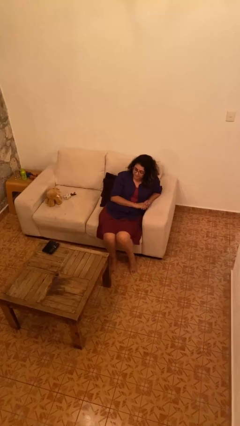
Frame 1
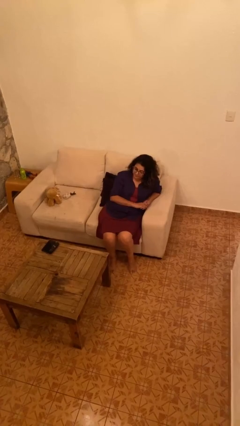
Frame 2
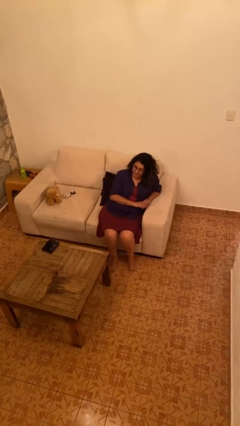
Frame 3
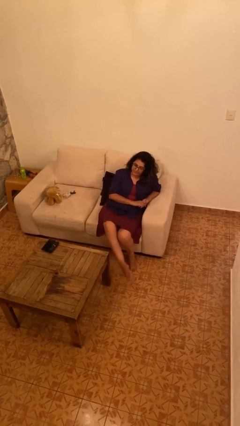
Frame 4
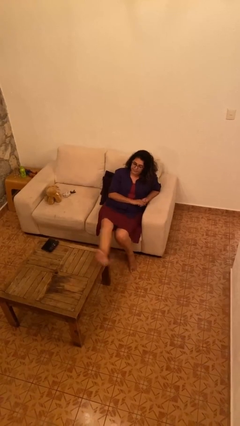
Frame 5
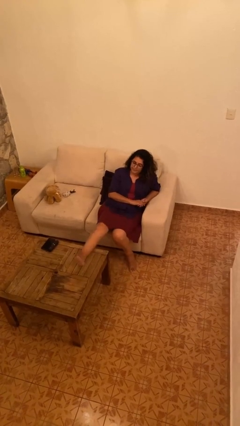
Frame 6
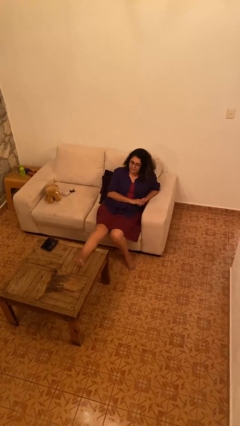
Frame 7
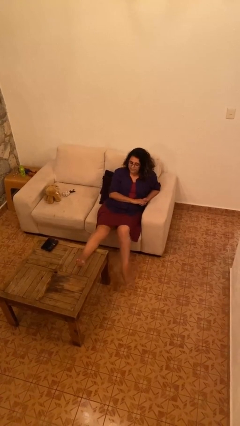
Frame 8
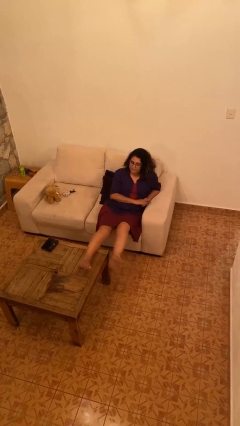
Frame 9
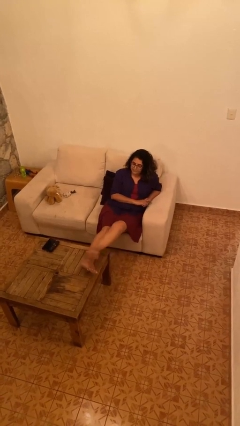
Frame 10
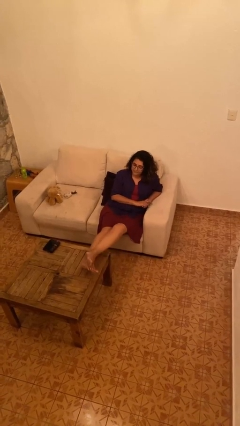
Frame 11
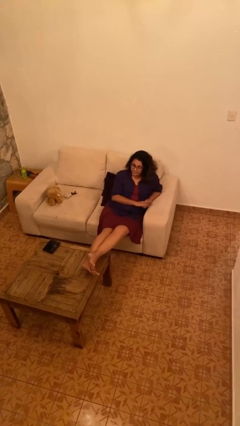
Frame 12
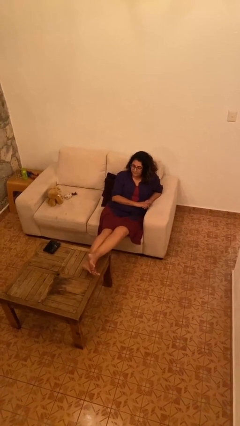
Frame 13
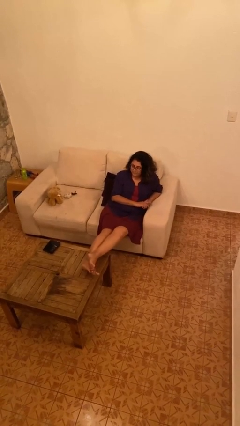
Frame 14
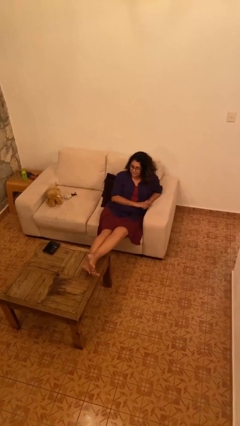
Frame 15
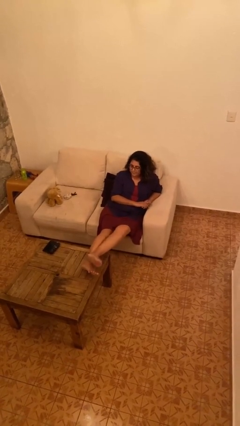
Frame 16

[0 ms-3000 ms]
person puts feet up

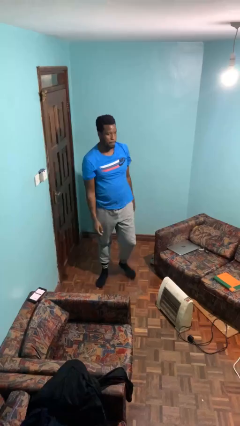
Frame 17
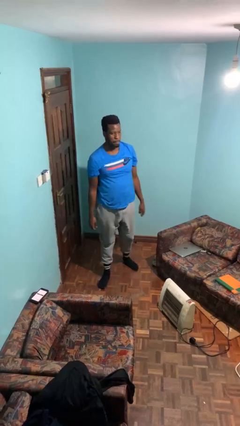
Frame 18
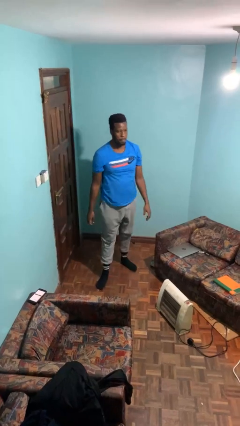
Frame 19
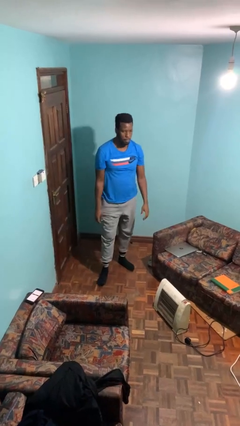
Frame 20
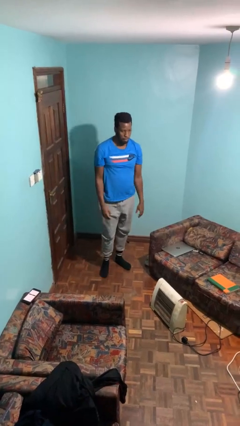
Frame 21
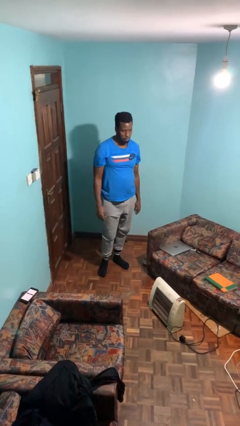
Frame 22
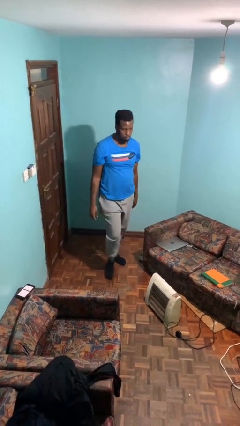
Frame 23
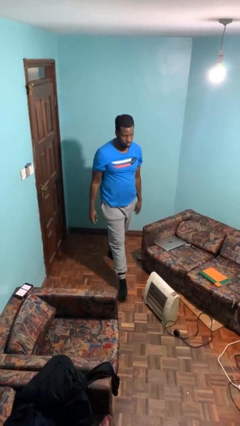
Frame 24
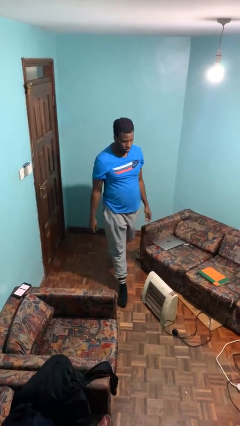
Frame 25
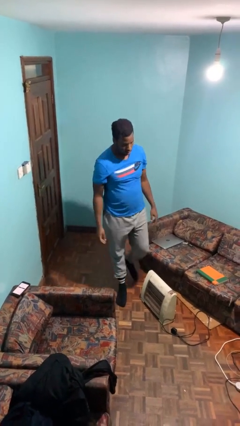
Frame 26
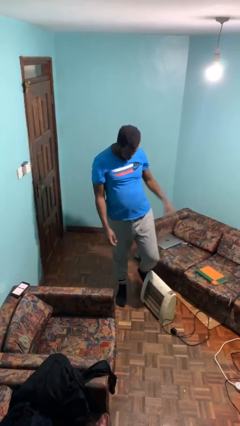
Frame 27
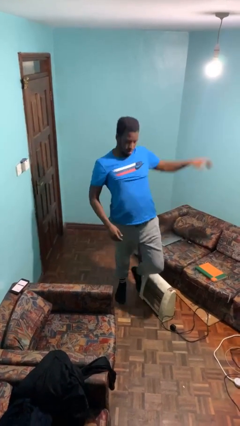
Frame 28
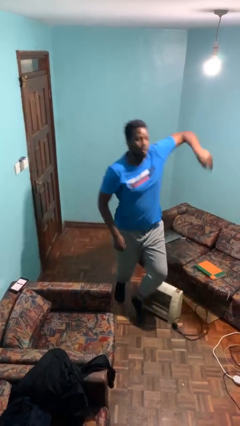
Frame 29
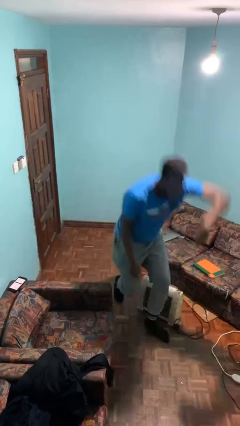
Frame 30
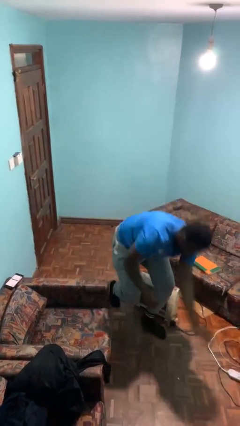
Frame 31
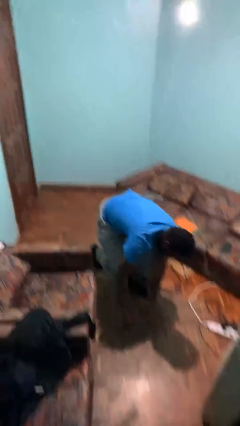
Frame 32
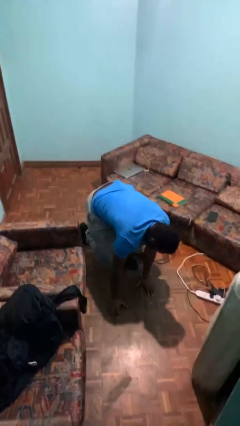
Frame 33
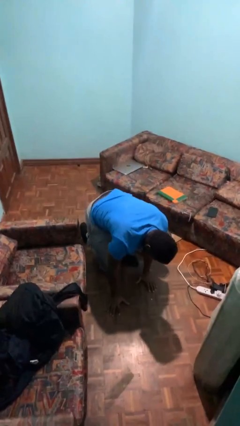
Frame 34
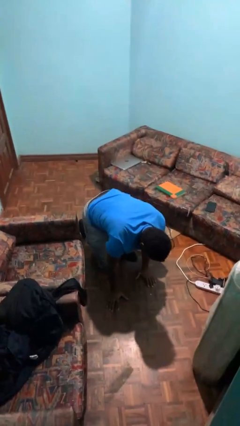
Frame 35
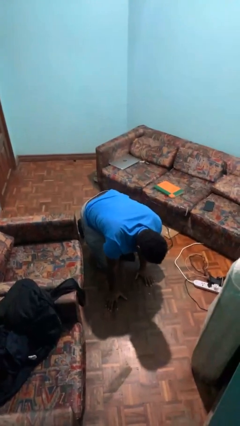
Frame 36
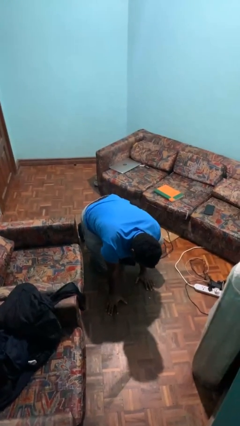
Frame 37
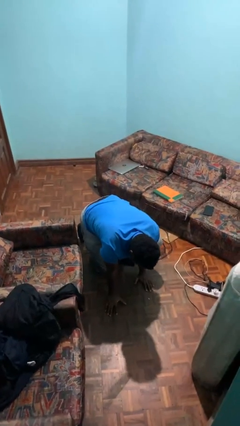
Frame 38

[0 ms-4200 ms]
person trips on object on floor

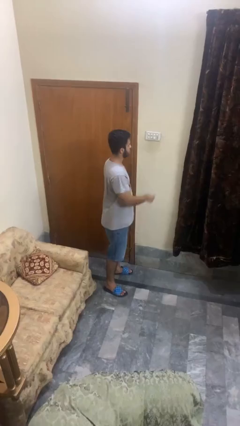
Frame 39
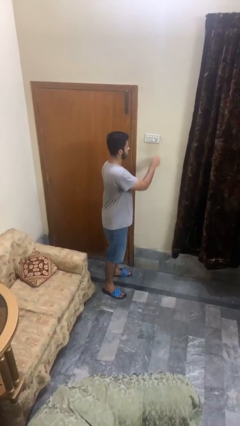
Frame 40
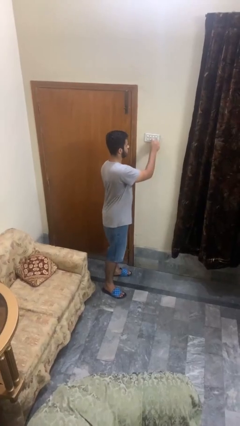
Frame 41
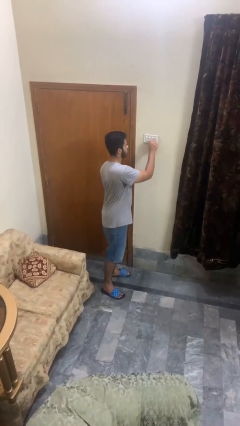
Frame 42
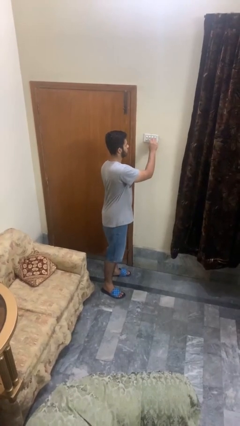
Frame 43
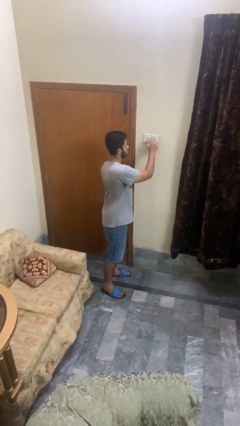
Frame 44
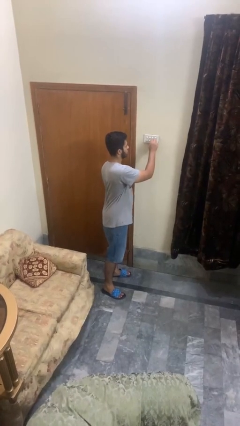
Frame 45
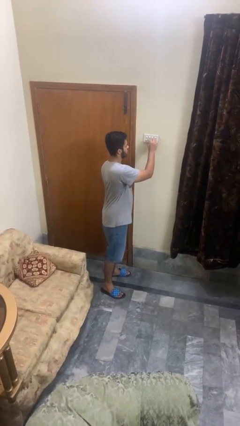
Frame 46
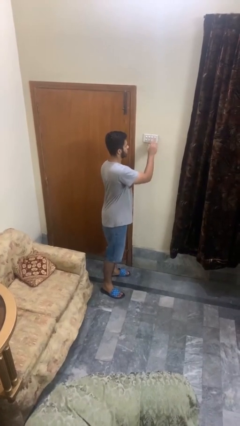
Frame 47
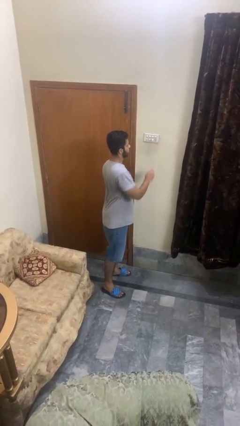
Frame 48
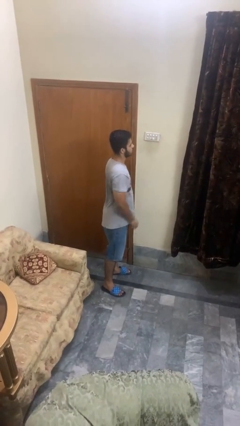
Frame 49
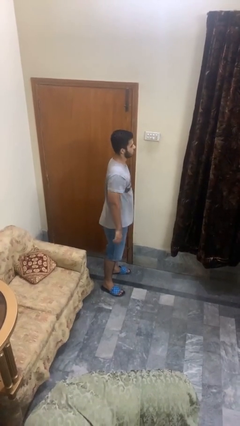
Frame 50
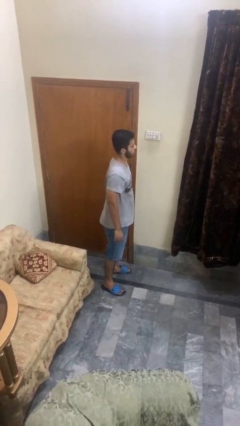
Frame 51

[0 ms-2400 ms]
person adjusts thermostat

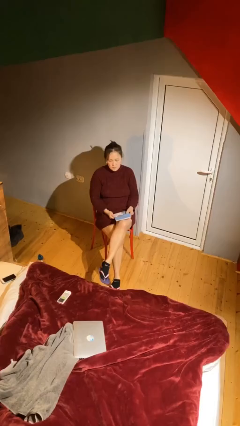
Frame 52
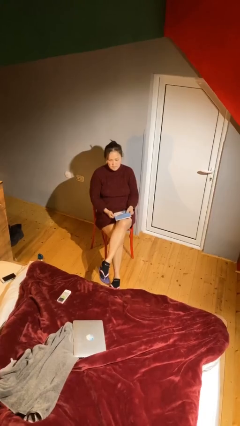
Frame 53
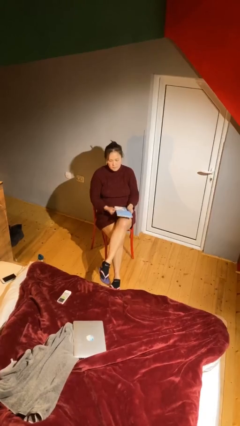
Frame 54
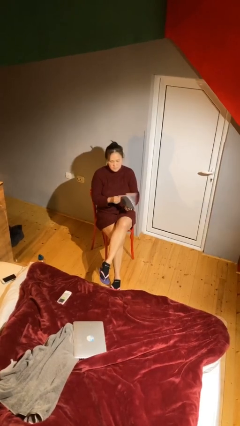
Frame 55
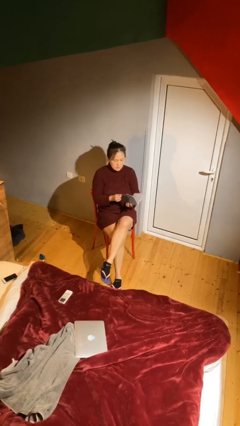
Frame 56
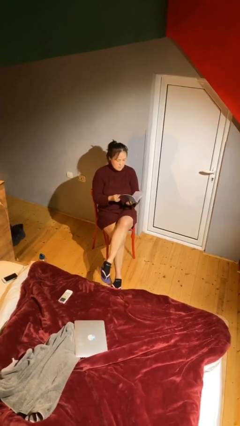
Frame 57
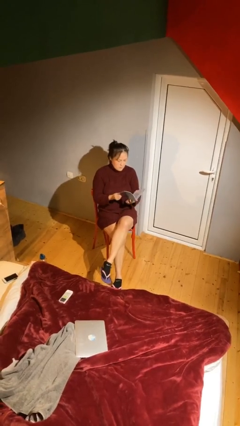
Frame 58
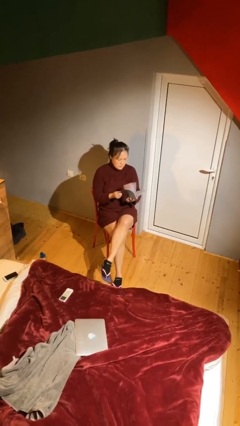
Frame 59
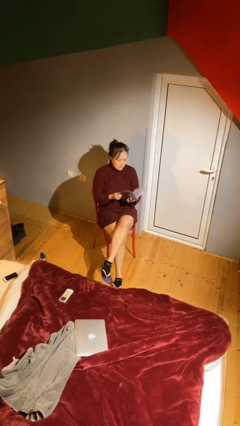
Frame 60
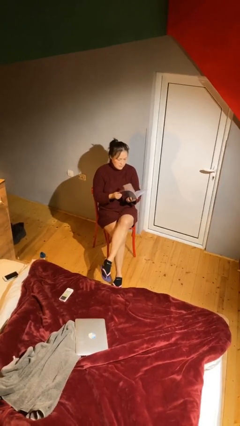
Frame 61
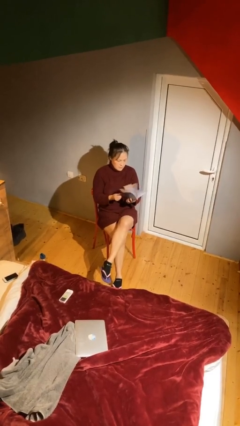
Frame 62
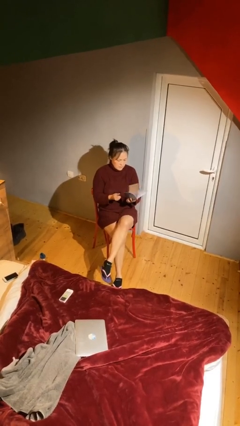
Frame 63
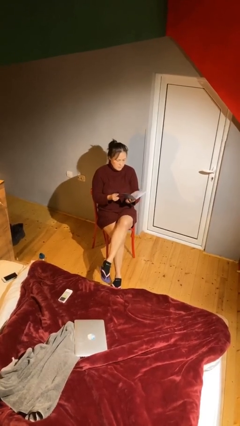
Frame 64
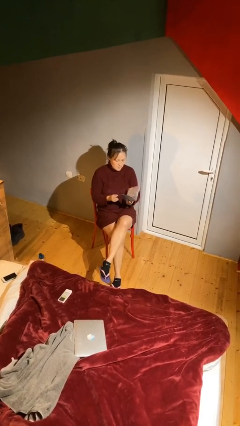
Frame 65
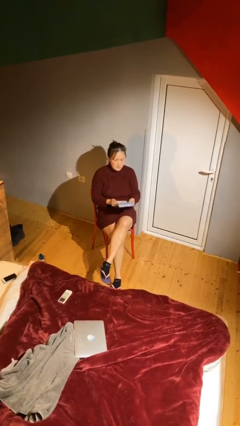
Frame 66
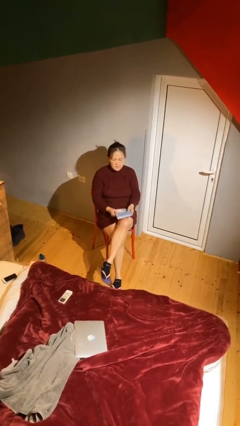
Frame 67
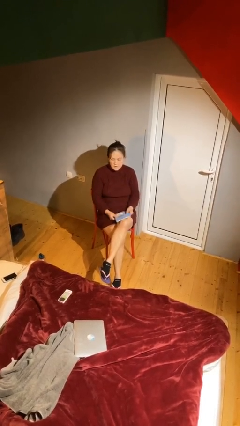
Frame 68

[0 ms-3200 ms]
person reads document

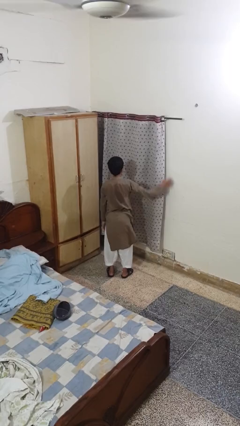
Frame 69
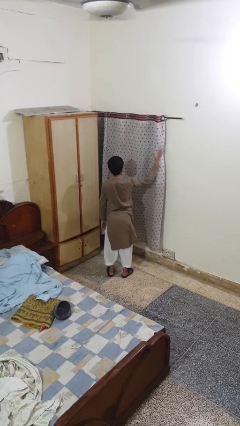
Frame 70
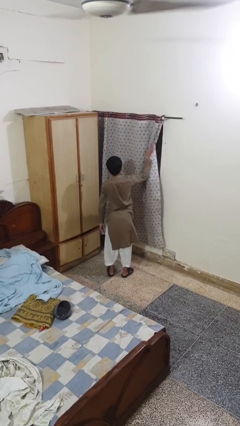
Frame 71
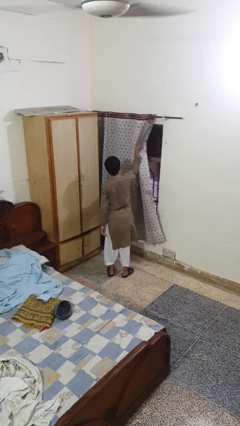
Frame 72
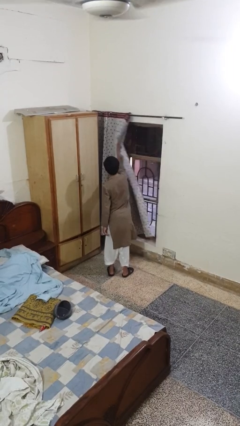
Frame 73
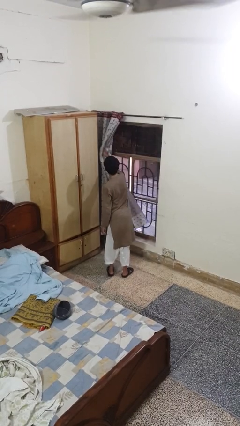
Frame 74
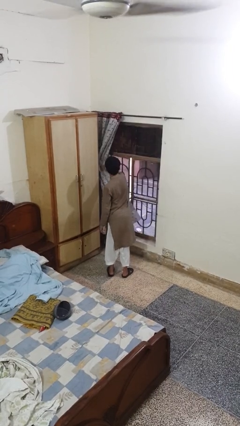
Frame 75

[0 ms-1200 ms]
person opens curtains

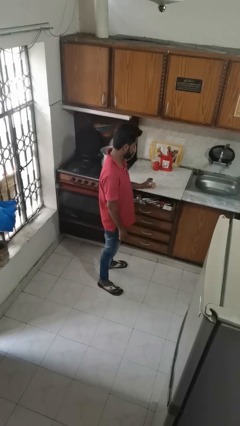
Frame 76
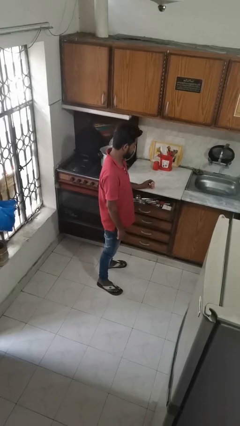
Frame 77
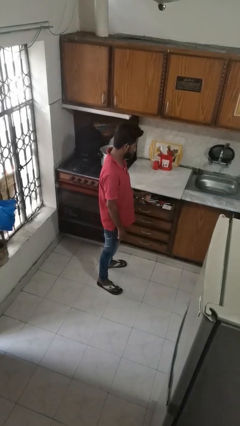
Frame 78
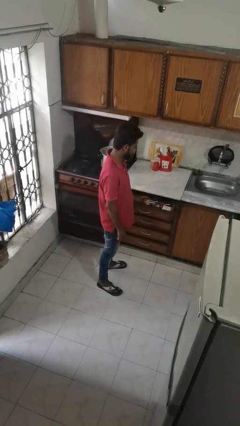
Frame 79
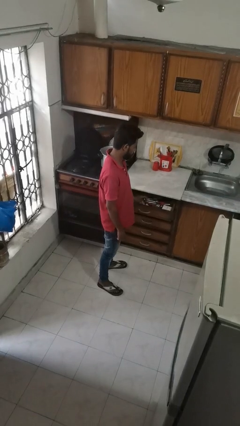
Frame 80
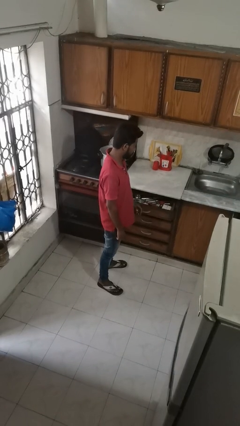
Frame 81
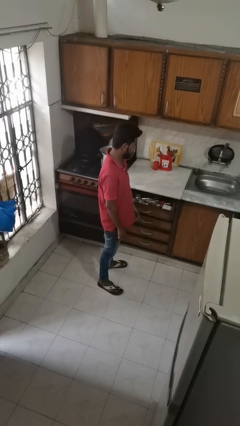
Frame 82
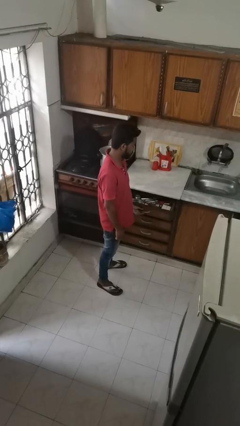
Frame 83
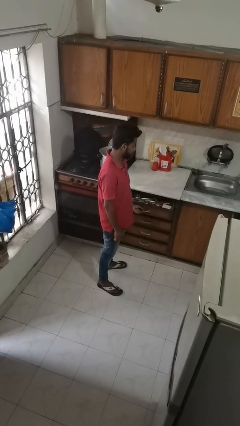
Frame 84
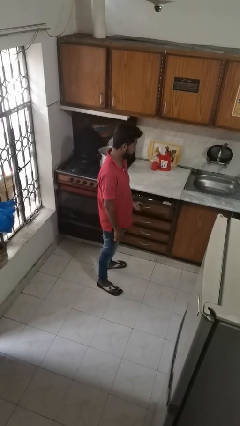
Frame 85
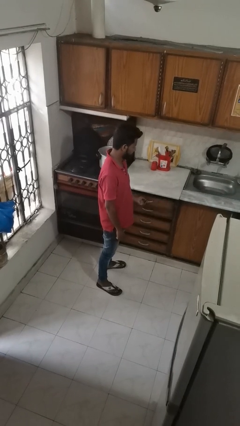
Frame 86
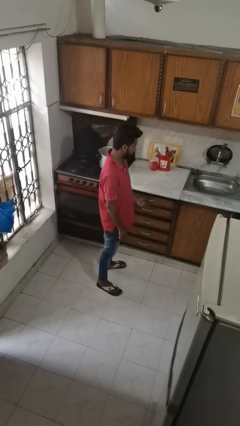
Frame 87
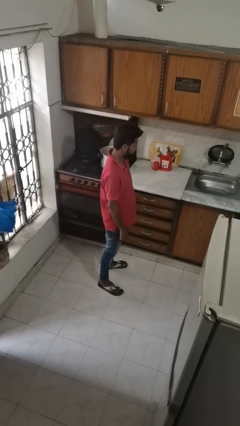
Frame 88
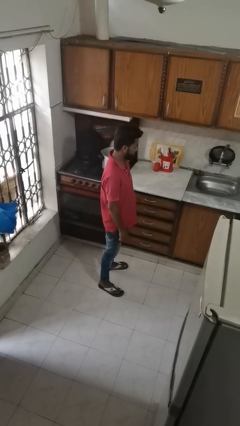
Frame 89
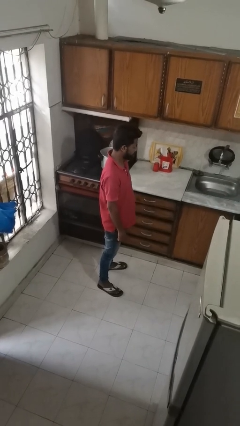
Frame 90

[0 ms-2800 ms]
person puts object into kitchen drawer

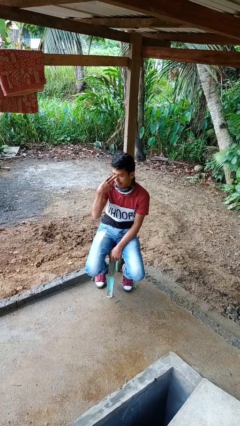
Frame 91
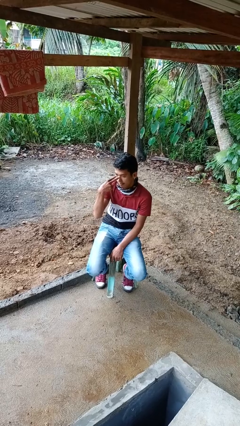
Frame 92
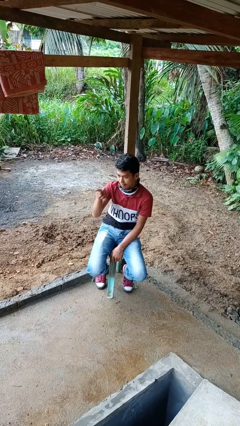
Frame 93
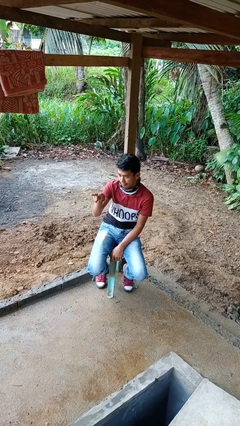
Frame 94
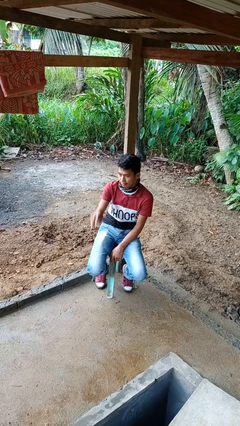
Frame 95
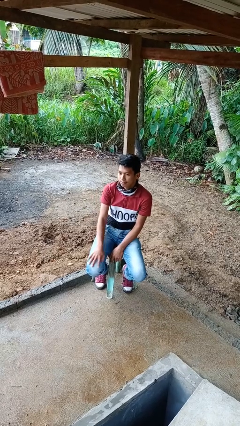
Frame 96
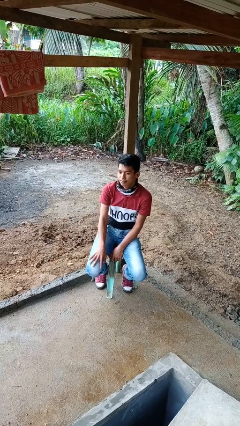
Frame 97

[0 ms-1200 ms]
person gestures watch closely
